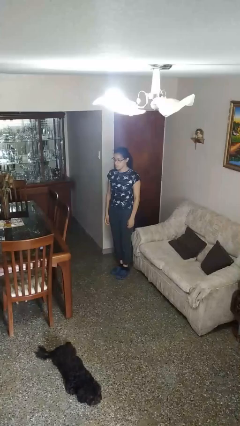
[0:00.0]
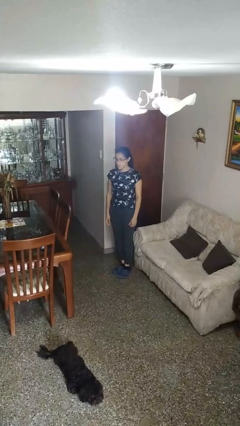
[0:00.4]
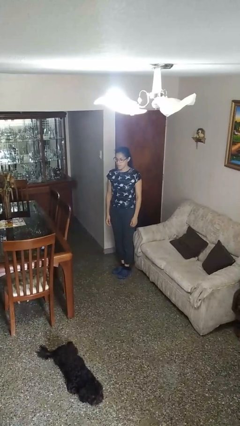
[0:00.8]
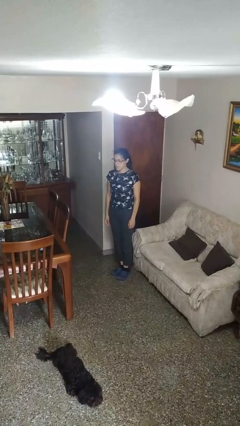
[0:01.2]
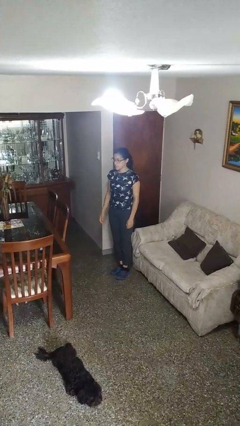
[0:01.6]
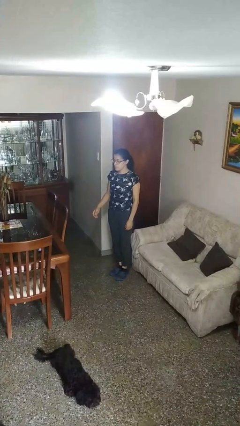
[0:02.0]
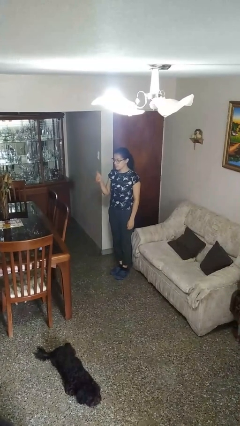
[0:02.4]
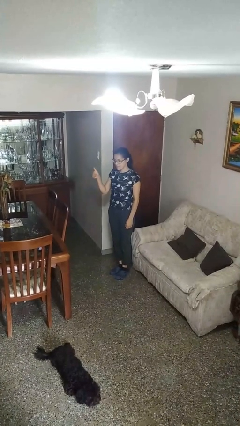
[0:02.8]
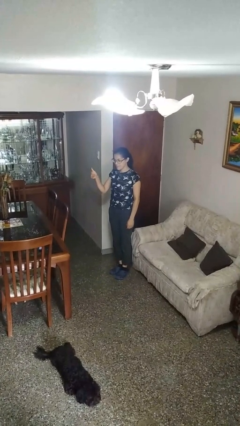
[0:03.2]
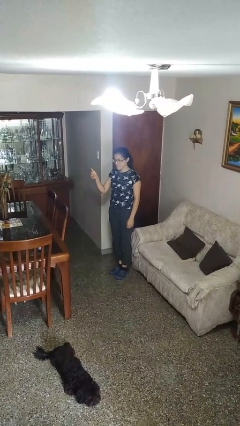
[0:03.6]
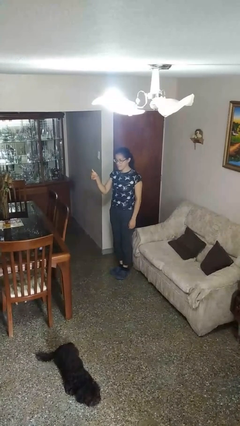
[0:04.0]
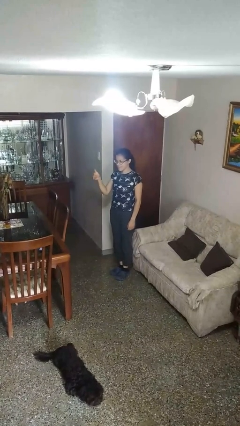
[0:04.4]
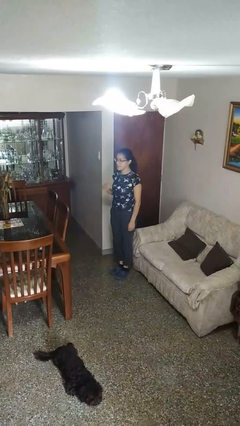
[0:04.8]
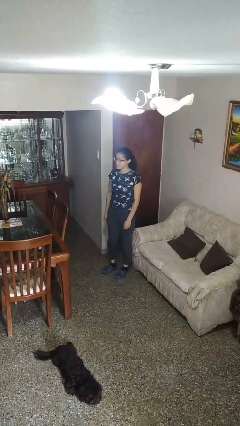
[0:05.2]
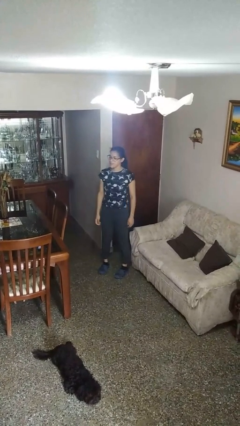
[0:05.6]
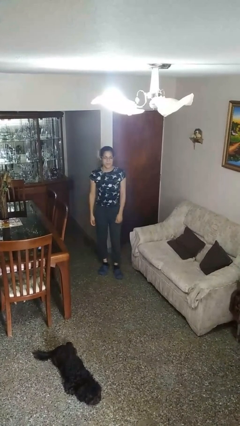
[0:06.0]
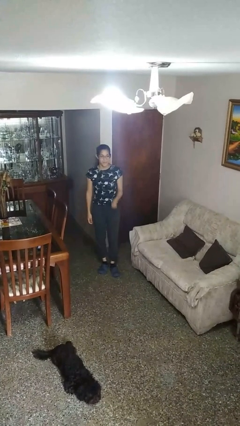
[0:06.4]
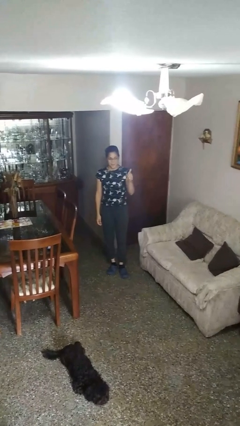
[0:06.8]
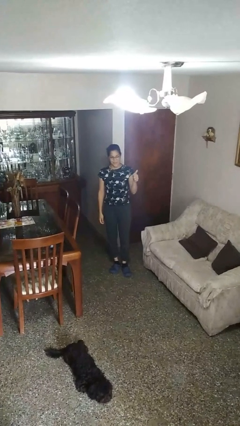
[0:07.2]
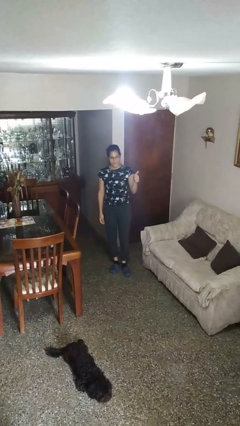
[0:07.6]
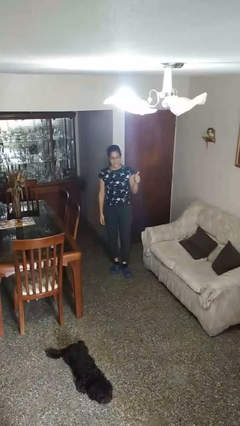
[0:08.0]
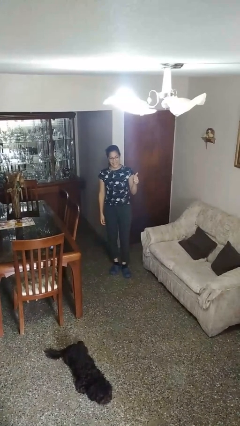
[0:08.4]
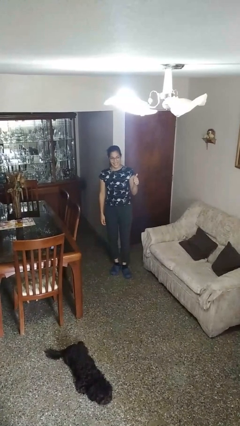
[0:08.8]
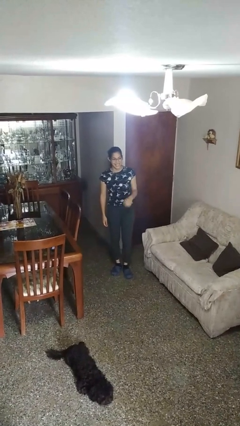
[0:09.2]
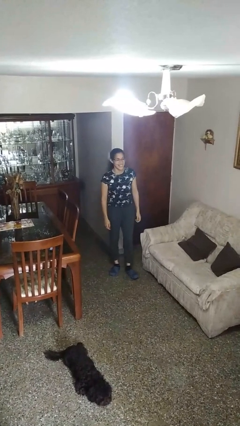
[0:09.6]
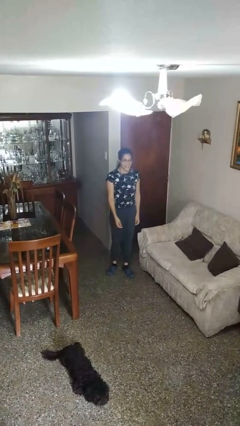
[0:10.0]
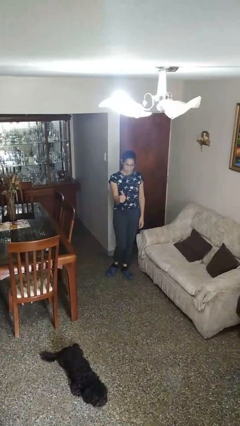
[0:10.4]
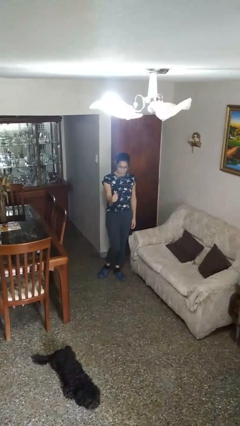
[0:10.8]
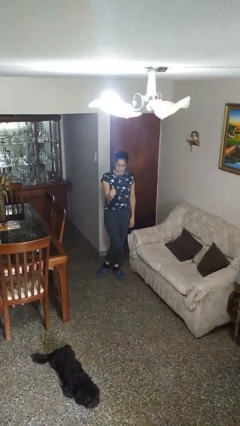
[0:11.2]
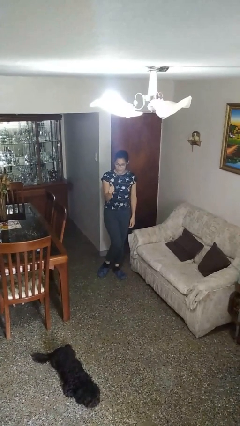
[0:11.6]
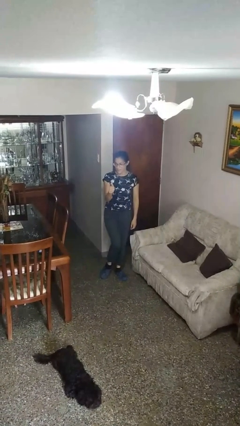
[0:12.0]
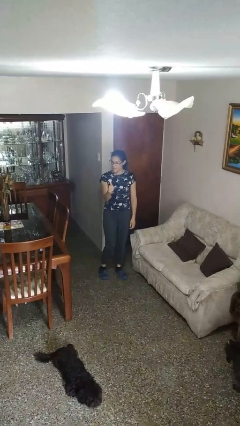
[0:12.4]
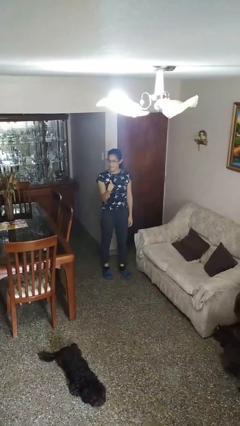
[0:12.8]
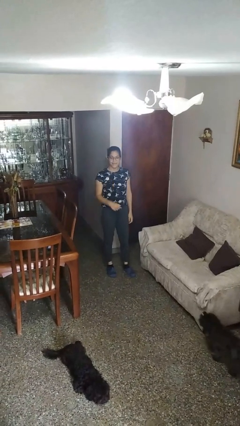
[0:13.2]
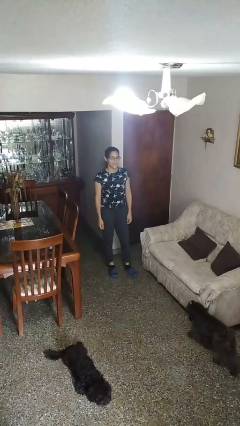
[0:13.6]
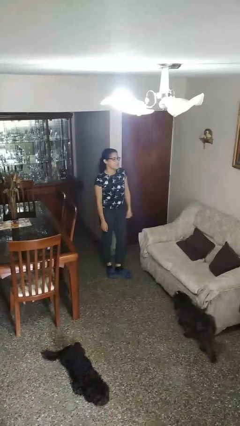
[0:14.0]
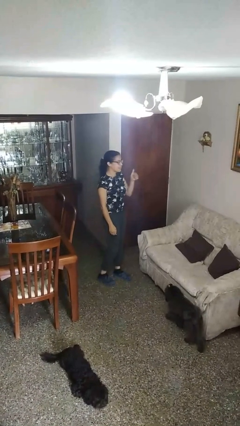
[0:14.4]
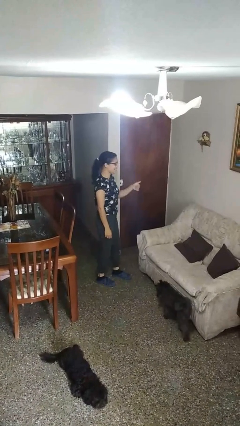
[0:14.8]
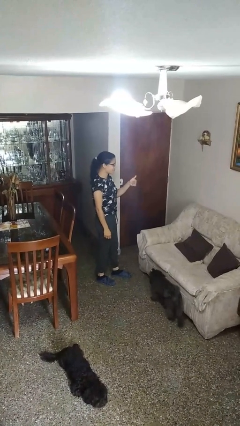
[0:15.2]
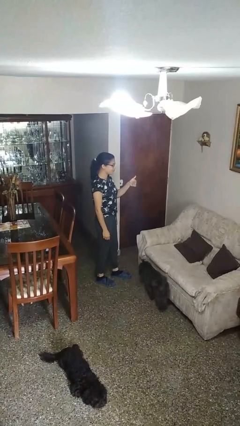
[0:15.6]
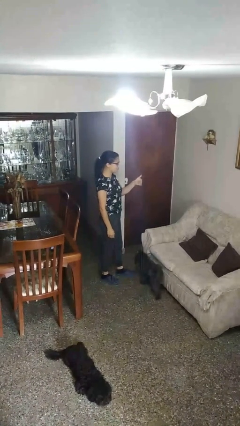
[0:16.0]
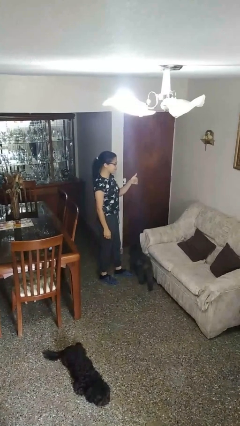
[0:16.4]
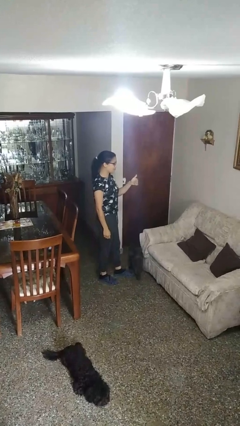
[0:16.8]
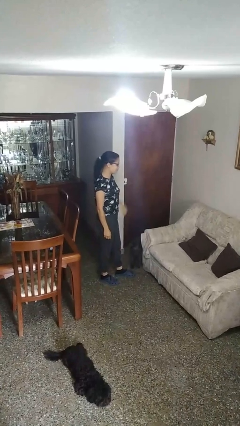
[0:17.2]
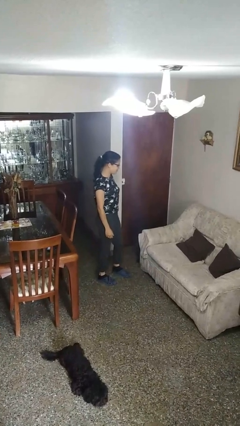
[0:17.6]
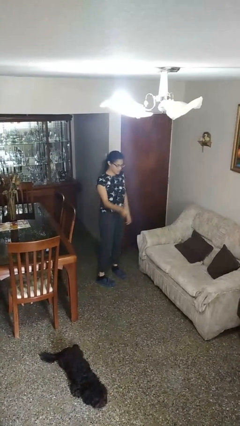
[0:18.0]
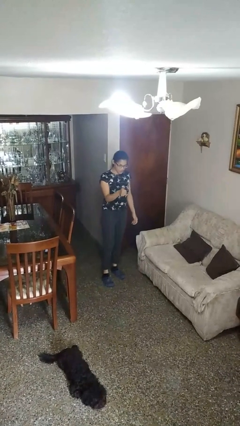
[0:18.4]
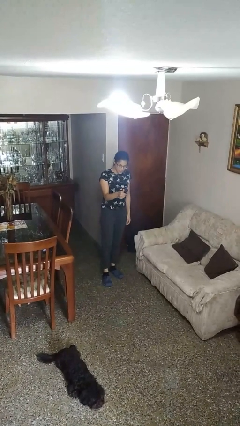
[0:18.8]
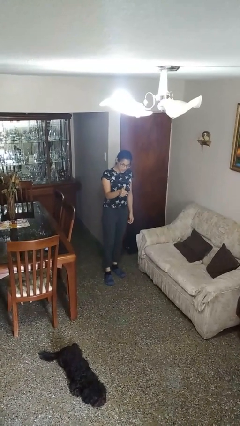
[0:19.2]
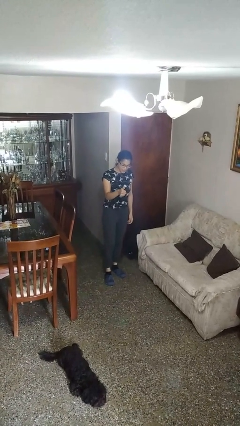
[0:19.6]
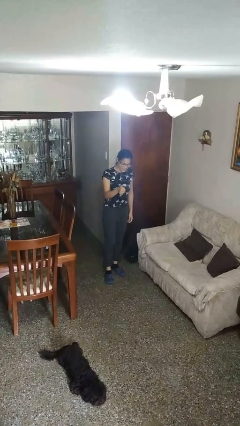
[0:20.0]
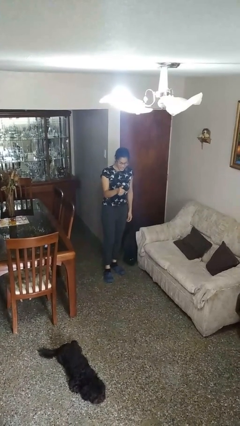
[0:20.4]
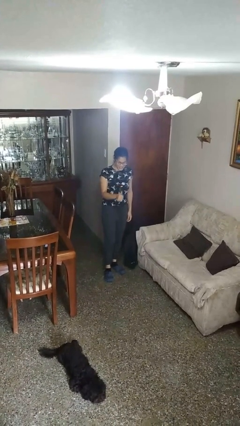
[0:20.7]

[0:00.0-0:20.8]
person gestures thumbs up

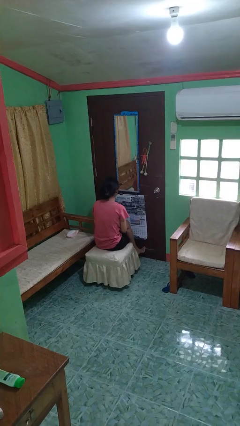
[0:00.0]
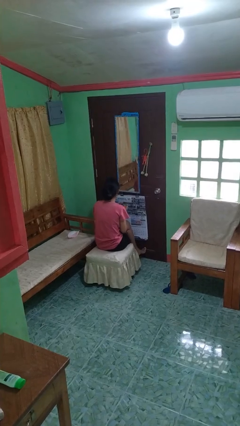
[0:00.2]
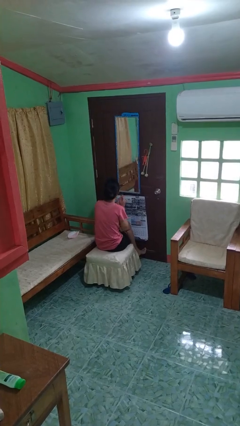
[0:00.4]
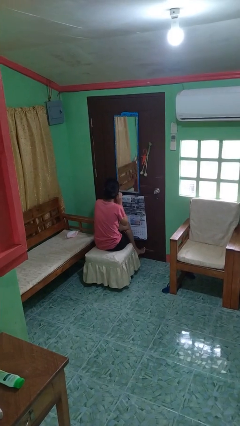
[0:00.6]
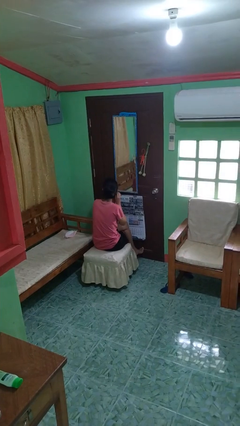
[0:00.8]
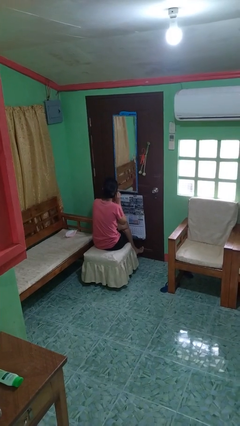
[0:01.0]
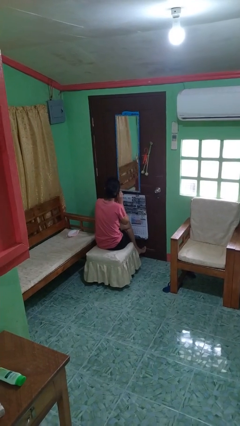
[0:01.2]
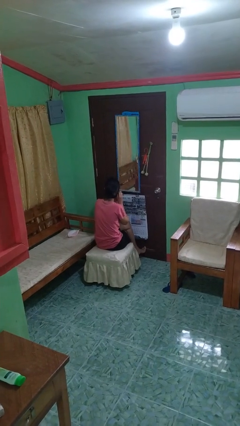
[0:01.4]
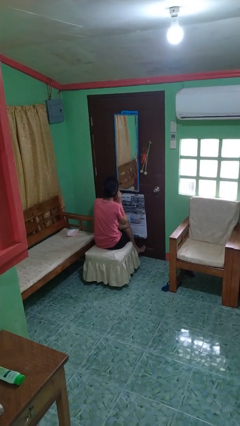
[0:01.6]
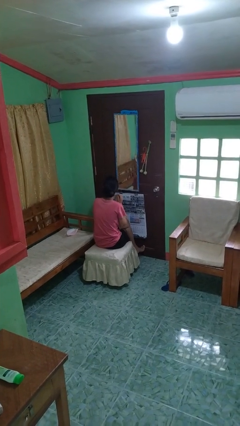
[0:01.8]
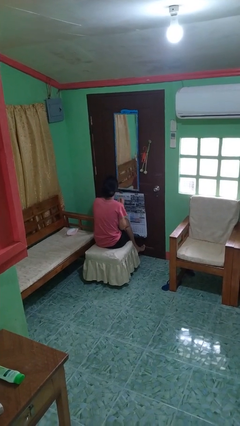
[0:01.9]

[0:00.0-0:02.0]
person puts on earrings

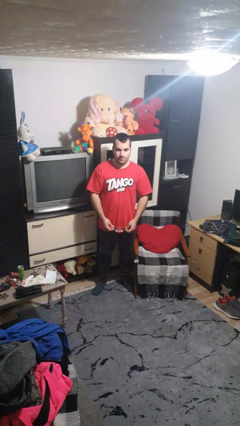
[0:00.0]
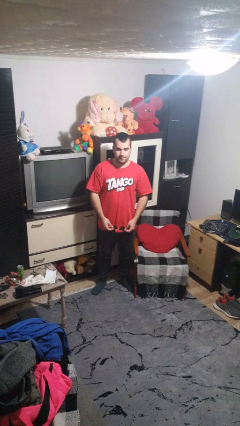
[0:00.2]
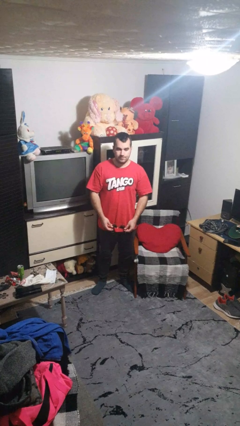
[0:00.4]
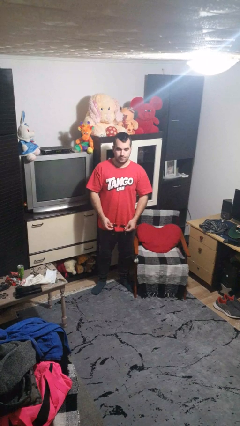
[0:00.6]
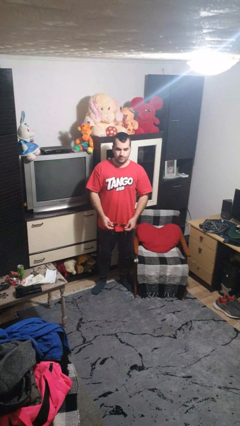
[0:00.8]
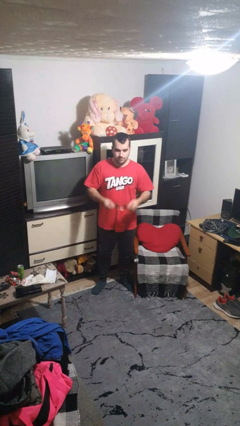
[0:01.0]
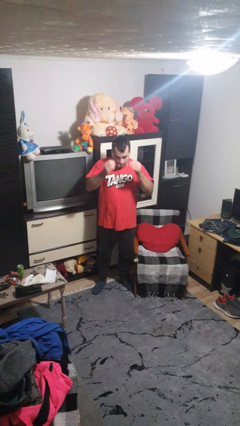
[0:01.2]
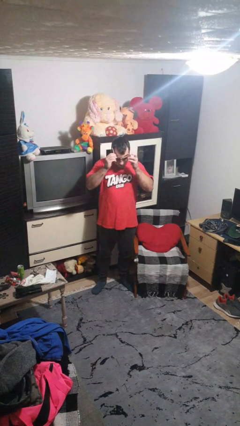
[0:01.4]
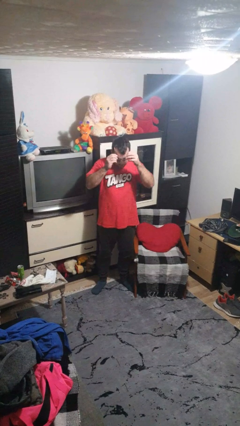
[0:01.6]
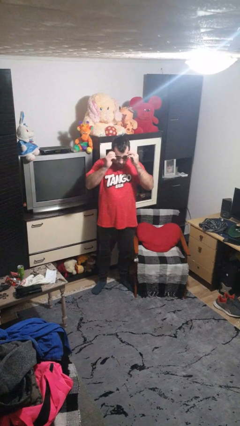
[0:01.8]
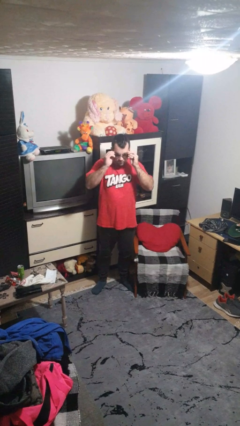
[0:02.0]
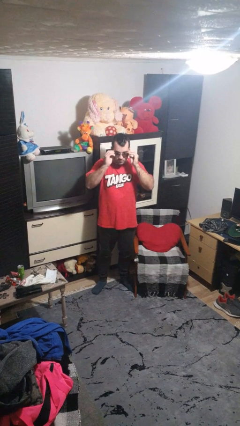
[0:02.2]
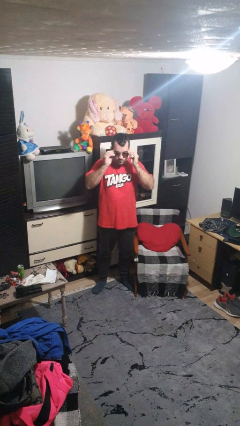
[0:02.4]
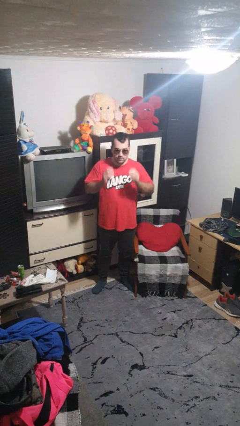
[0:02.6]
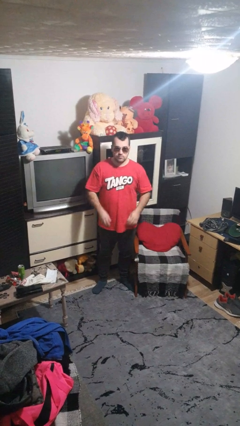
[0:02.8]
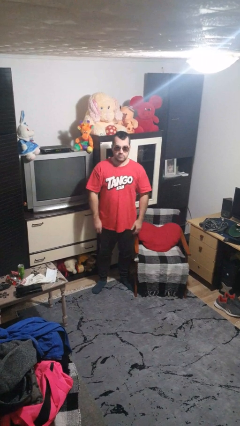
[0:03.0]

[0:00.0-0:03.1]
person puts on sunglasses

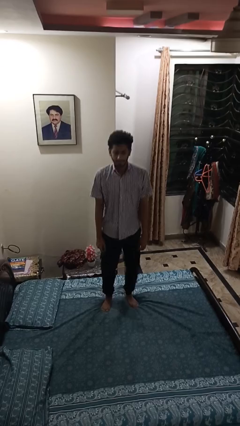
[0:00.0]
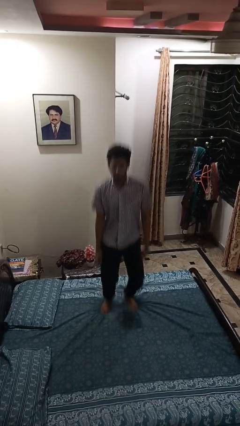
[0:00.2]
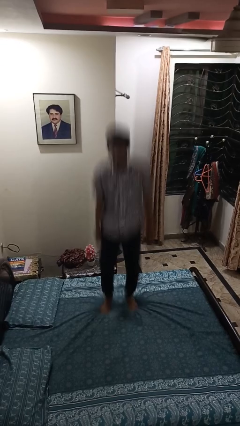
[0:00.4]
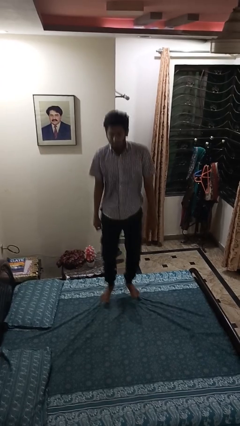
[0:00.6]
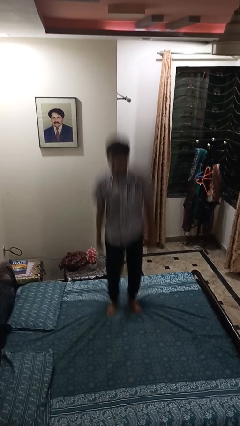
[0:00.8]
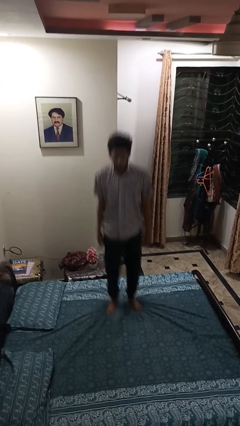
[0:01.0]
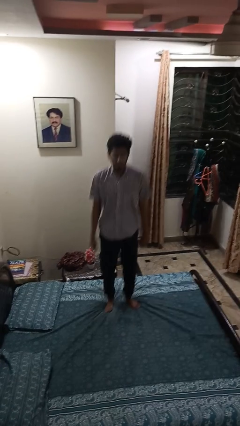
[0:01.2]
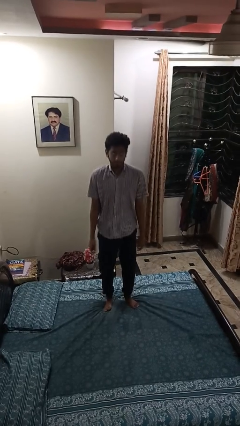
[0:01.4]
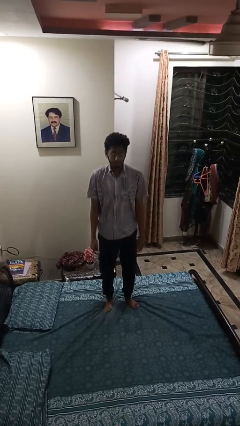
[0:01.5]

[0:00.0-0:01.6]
person jumps on bed

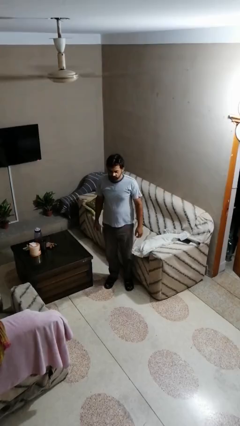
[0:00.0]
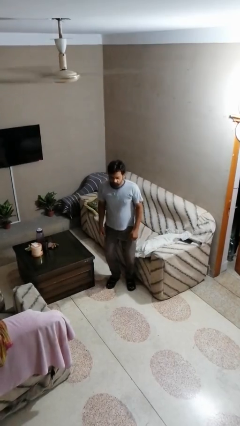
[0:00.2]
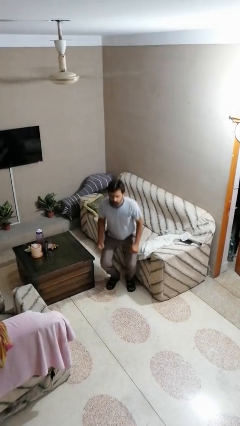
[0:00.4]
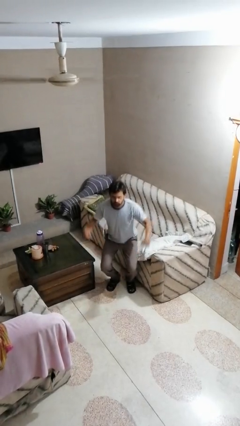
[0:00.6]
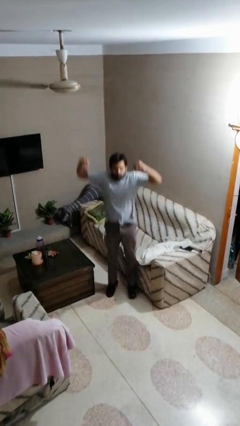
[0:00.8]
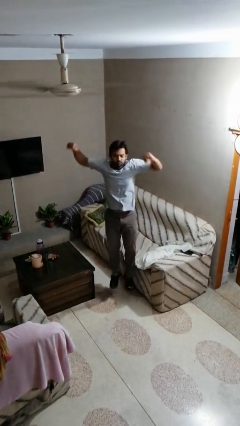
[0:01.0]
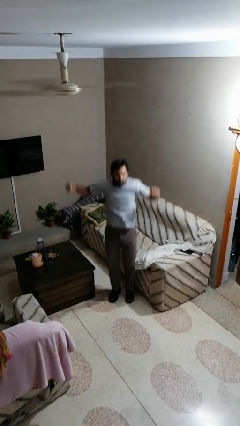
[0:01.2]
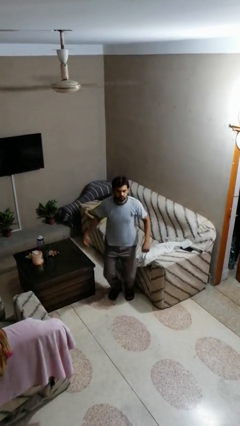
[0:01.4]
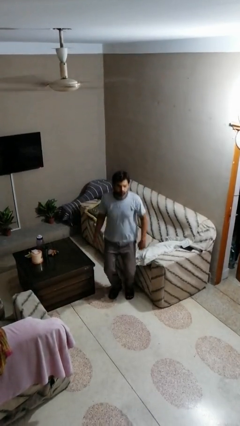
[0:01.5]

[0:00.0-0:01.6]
person jumps
